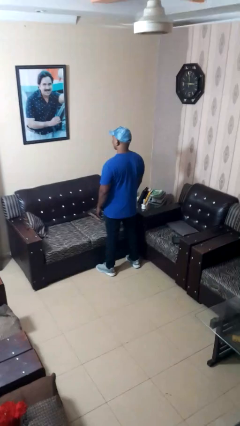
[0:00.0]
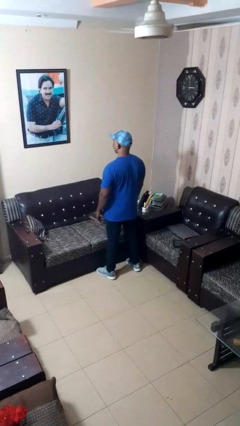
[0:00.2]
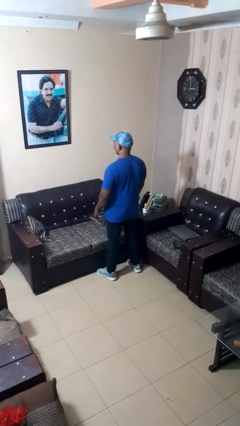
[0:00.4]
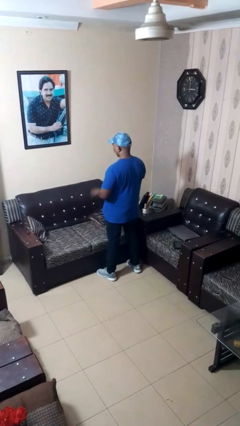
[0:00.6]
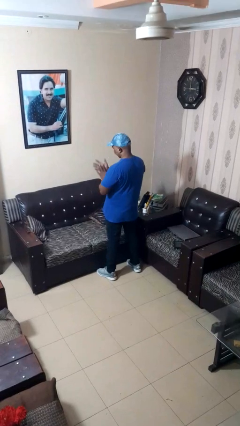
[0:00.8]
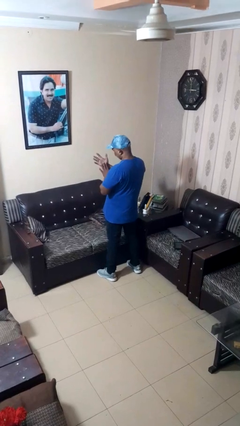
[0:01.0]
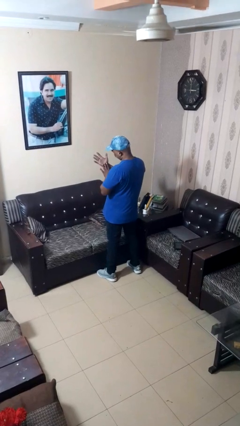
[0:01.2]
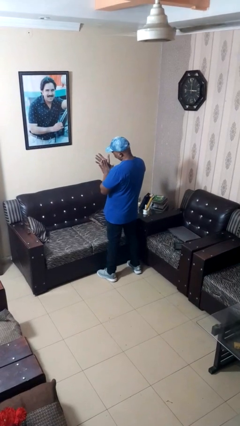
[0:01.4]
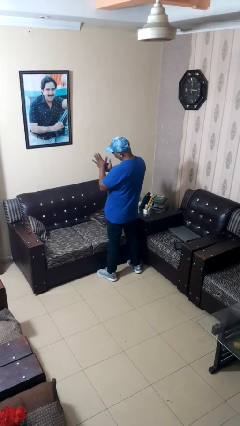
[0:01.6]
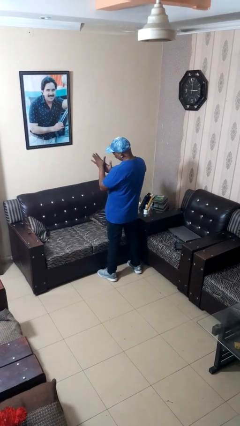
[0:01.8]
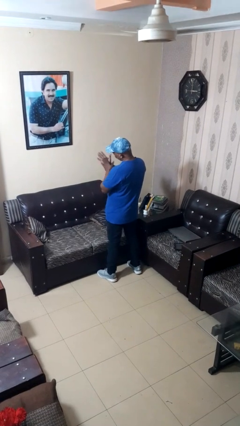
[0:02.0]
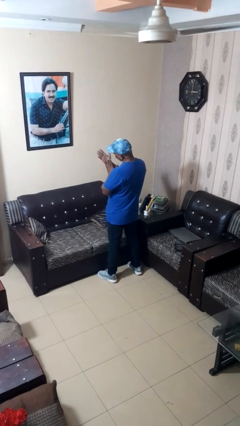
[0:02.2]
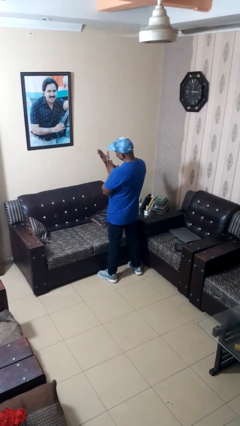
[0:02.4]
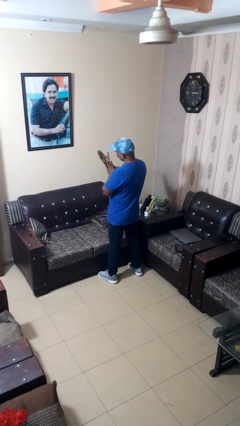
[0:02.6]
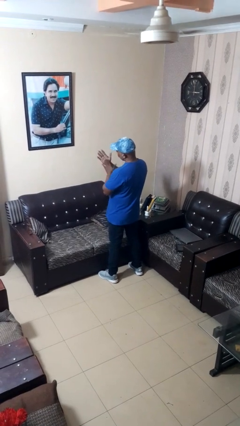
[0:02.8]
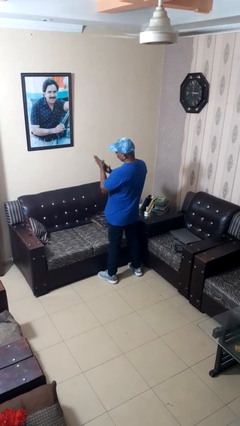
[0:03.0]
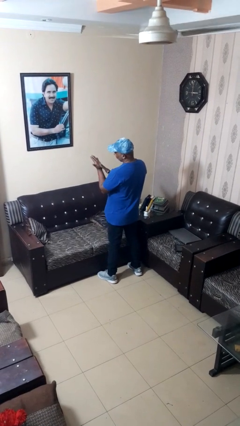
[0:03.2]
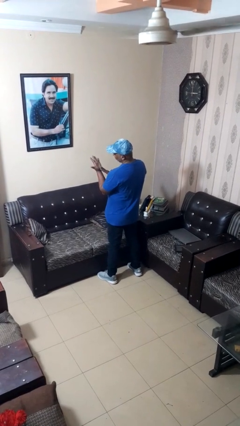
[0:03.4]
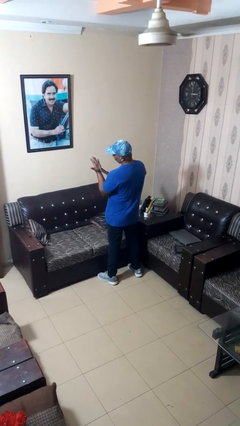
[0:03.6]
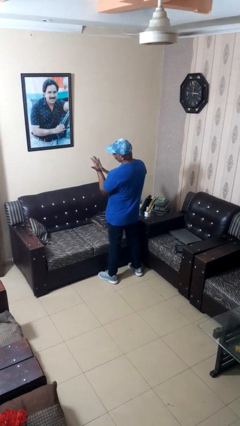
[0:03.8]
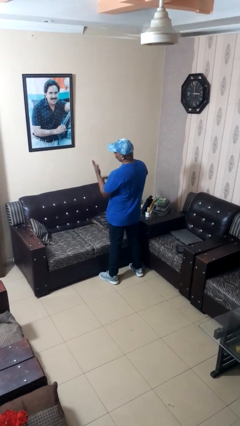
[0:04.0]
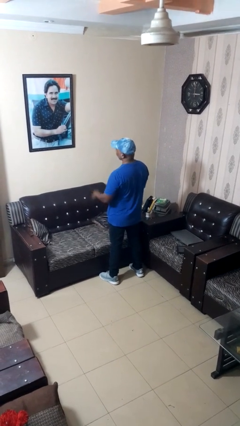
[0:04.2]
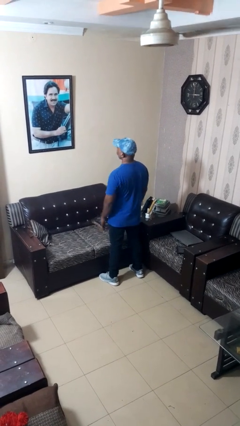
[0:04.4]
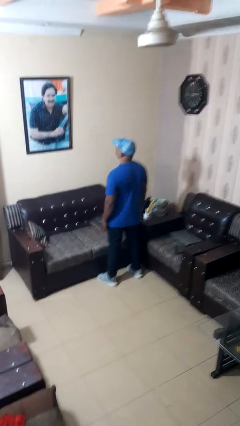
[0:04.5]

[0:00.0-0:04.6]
person looks at hands in lap

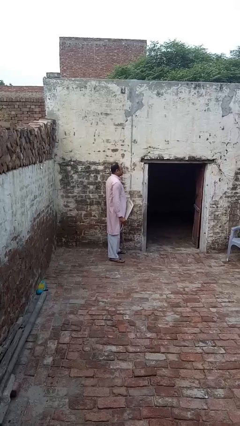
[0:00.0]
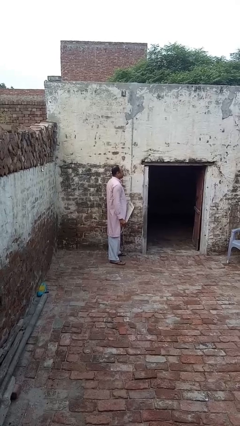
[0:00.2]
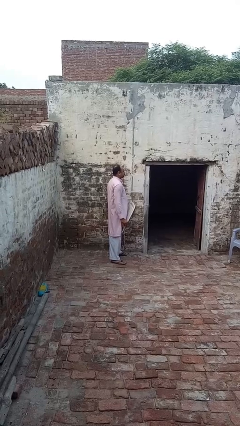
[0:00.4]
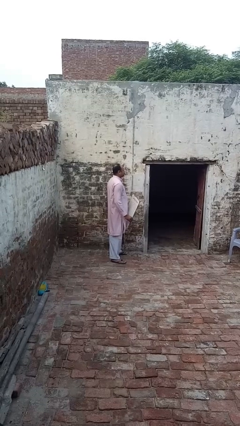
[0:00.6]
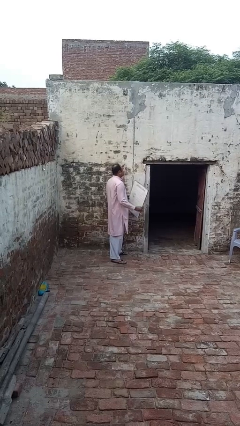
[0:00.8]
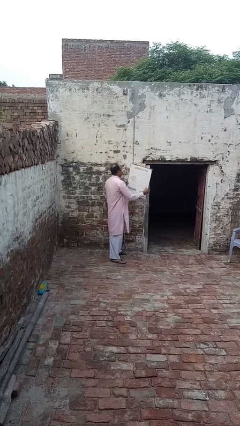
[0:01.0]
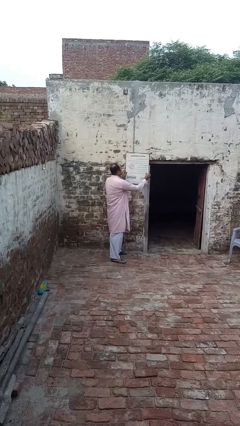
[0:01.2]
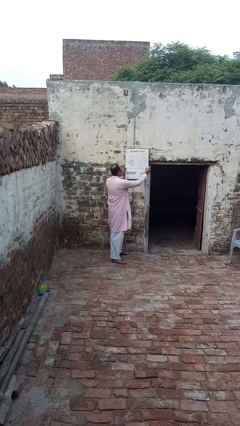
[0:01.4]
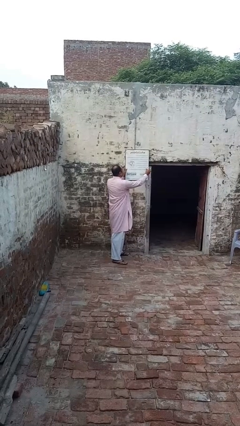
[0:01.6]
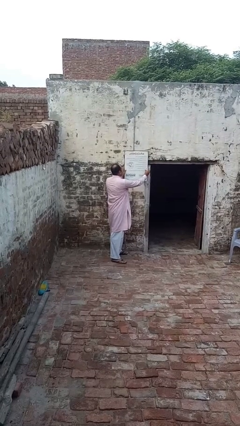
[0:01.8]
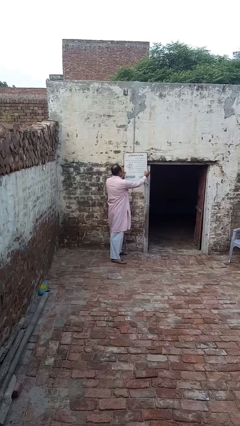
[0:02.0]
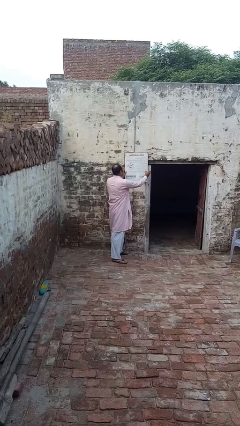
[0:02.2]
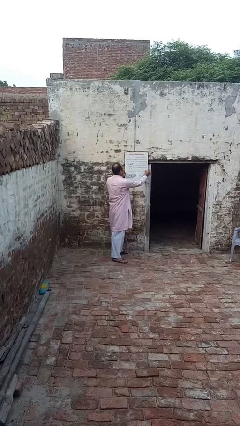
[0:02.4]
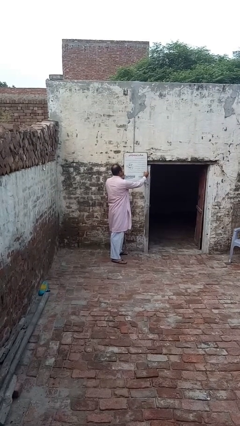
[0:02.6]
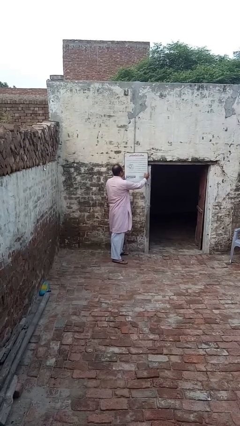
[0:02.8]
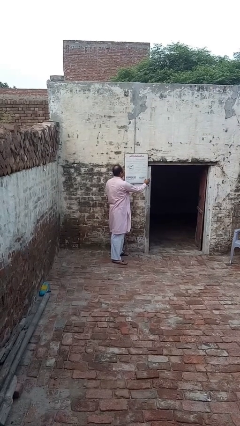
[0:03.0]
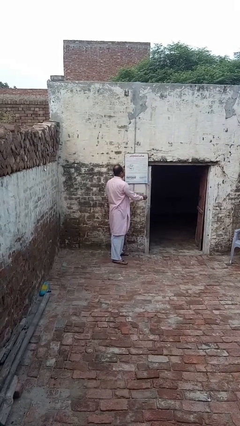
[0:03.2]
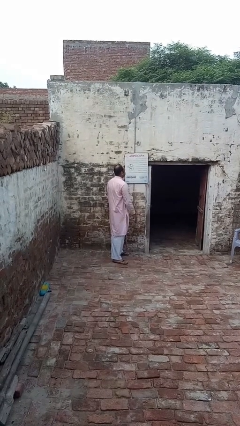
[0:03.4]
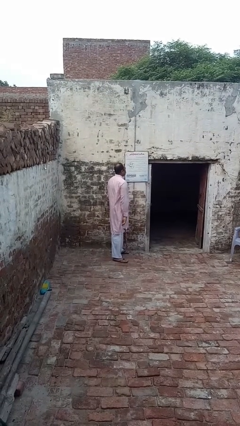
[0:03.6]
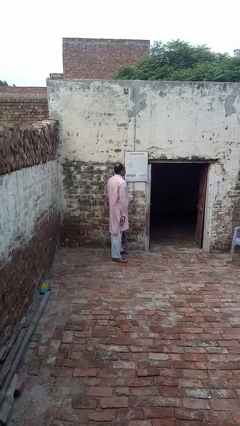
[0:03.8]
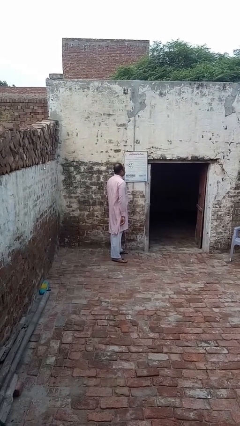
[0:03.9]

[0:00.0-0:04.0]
person puts up picture frame

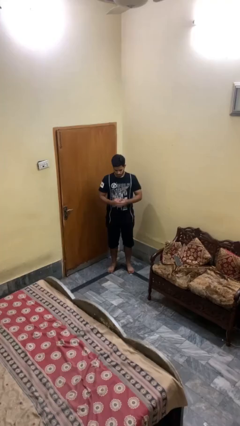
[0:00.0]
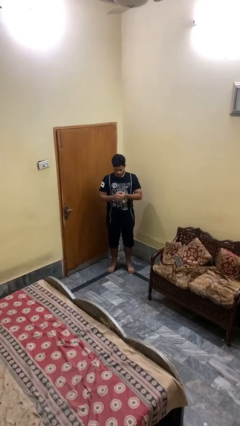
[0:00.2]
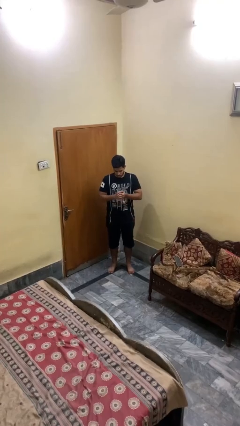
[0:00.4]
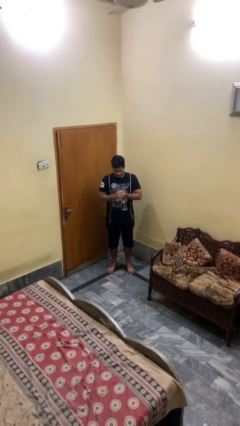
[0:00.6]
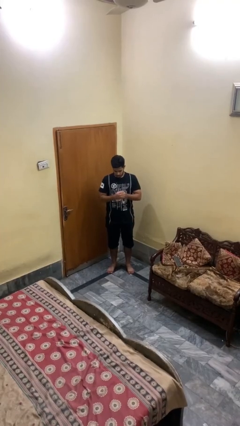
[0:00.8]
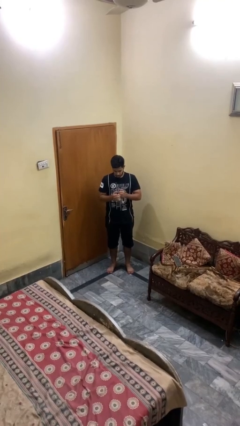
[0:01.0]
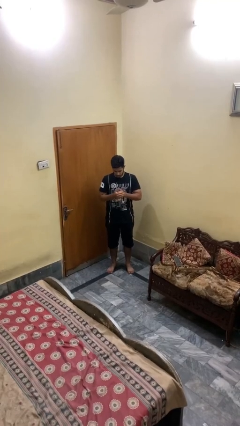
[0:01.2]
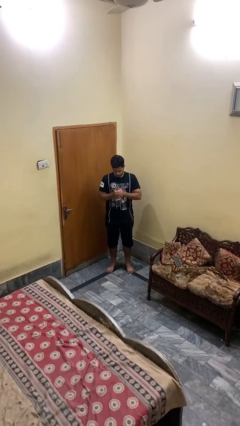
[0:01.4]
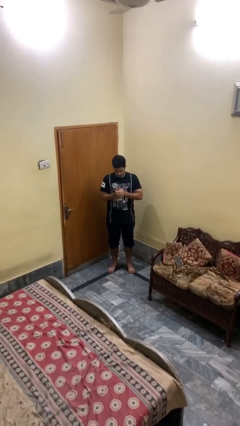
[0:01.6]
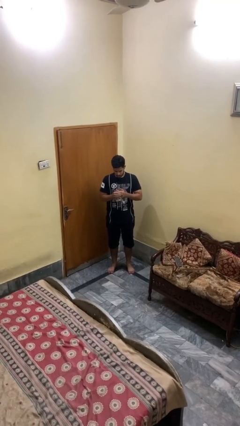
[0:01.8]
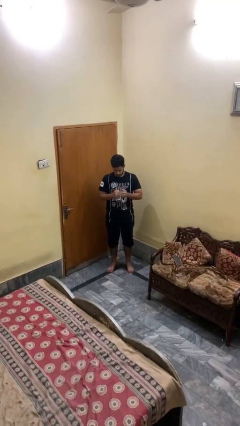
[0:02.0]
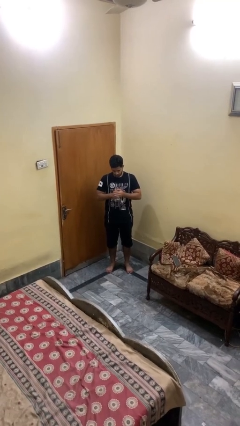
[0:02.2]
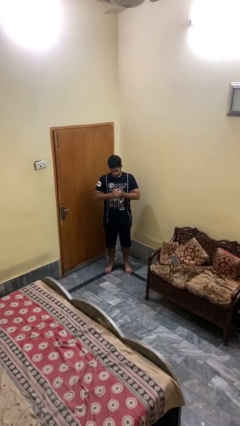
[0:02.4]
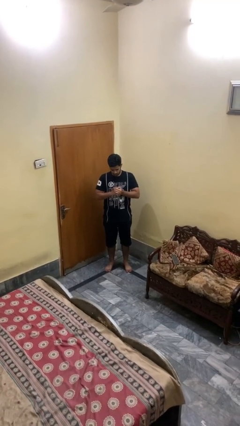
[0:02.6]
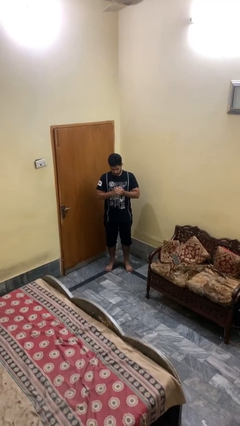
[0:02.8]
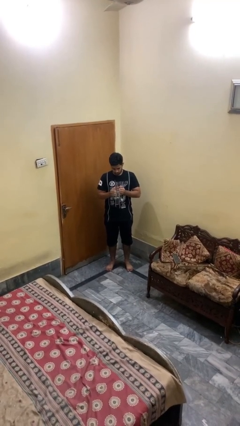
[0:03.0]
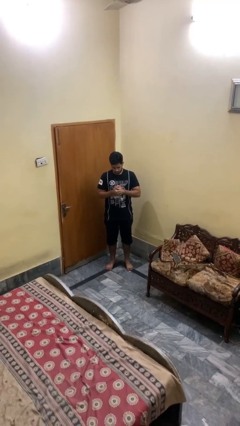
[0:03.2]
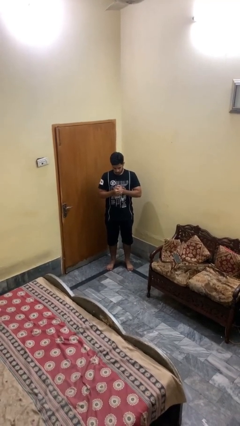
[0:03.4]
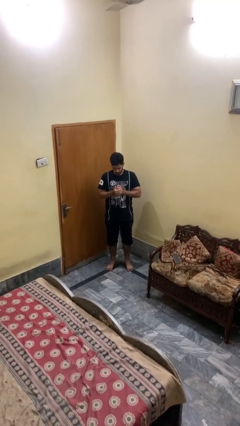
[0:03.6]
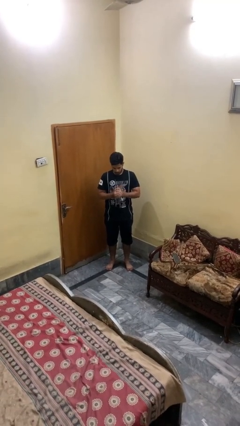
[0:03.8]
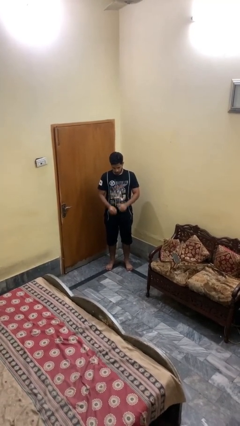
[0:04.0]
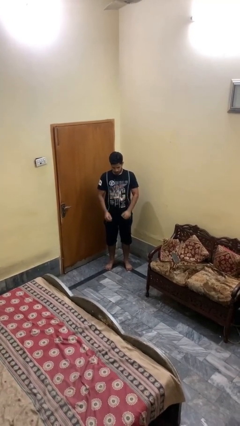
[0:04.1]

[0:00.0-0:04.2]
person cracks knuckles

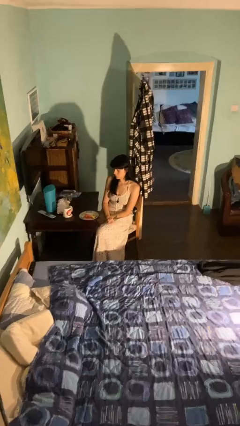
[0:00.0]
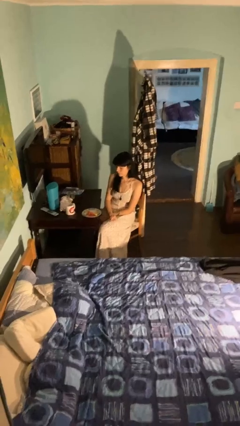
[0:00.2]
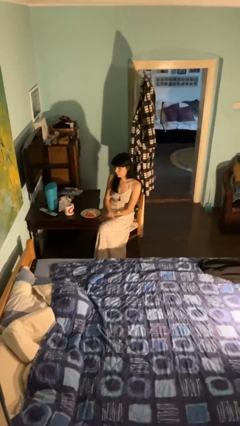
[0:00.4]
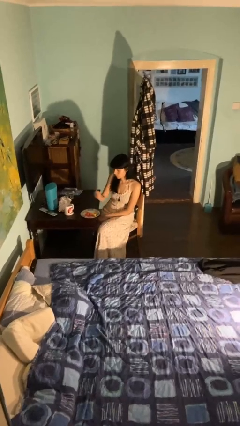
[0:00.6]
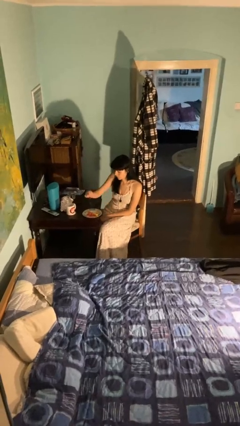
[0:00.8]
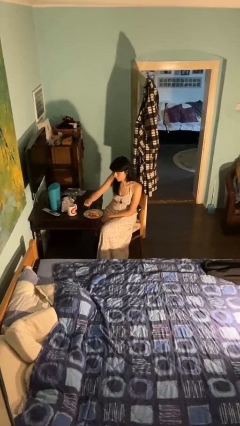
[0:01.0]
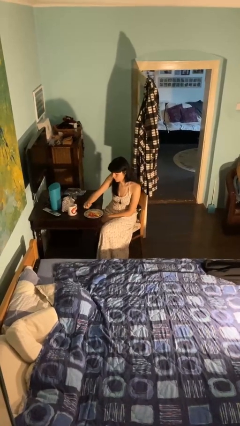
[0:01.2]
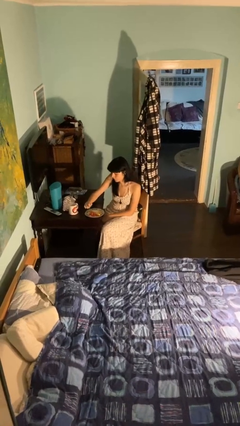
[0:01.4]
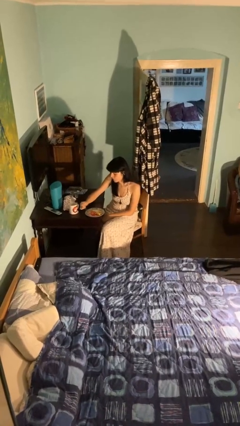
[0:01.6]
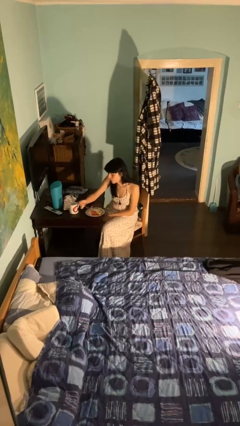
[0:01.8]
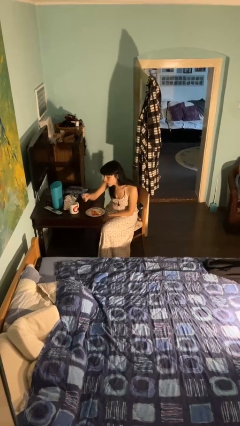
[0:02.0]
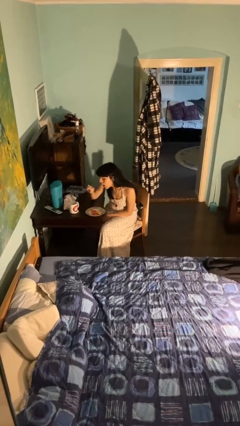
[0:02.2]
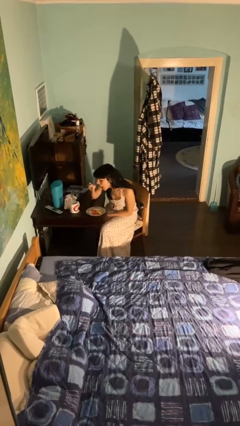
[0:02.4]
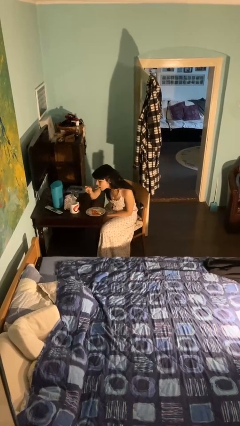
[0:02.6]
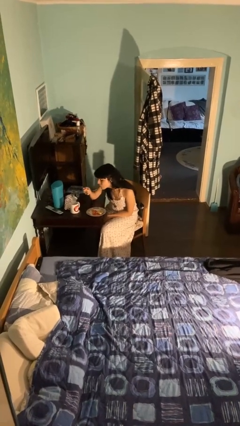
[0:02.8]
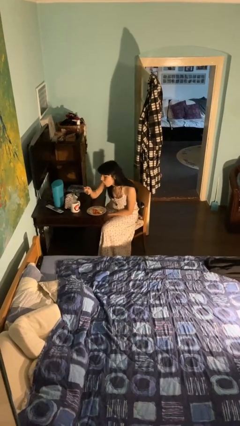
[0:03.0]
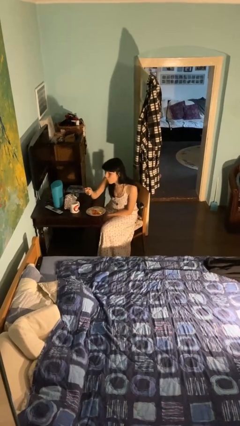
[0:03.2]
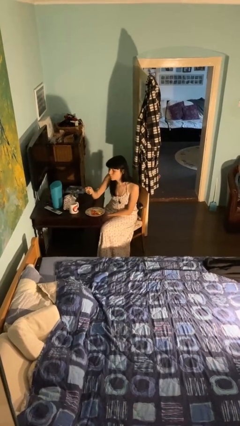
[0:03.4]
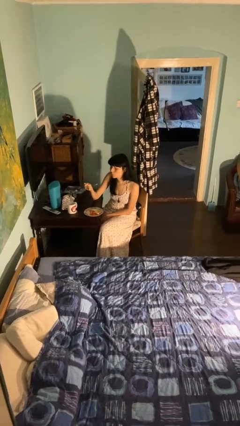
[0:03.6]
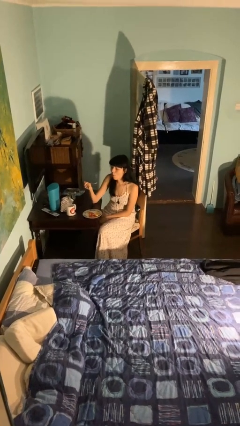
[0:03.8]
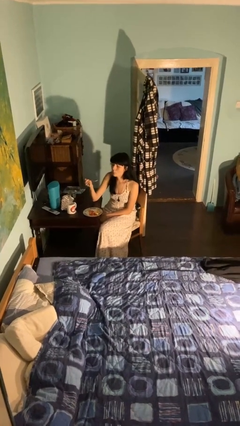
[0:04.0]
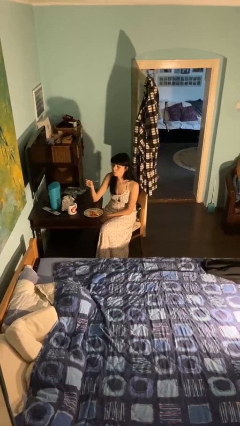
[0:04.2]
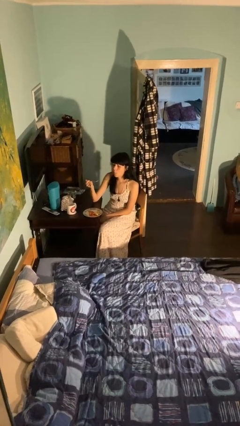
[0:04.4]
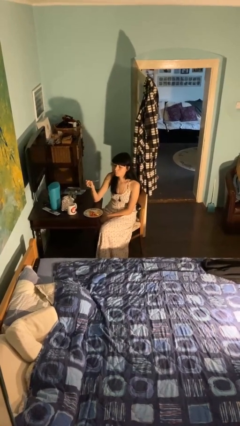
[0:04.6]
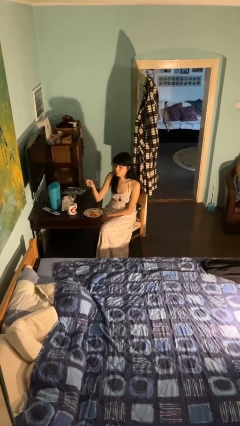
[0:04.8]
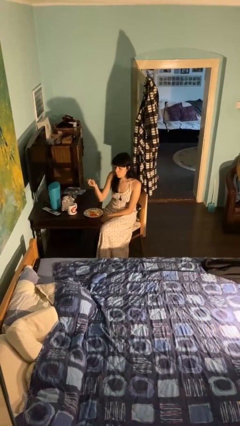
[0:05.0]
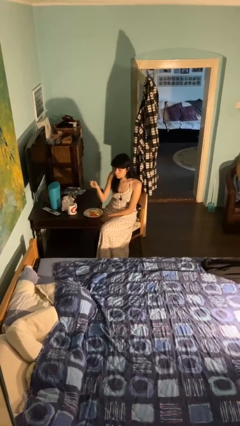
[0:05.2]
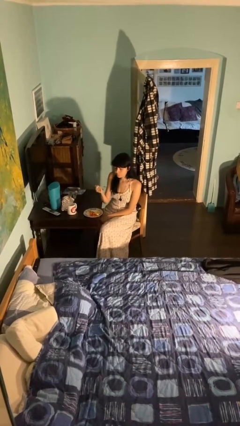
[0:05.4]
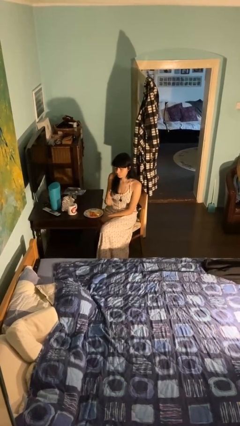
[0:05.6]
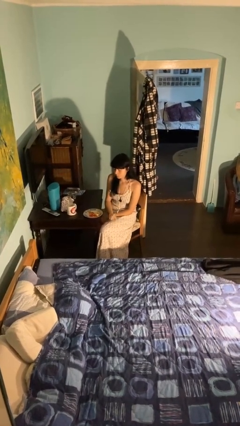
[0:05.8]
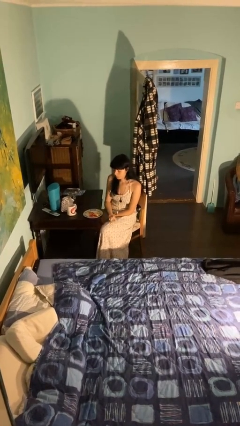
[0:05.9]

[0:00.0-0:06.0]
person eats with utensil
